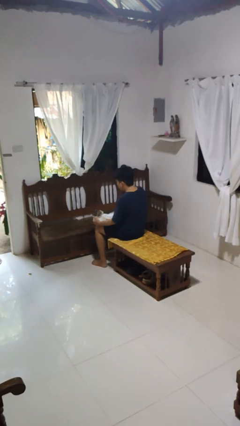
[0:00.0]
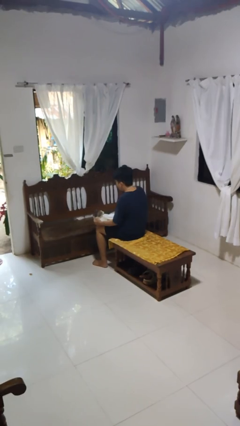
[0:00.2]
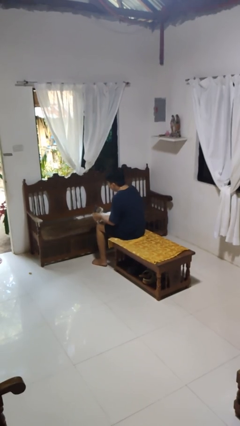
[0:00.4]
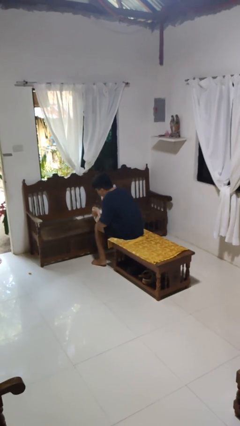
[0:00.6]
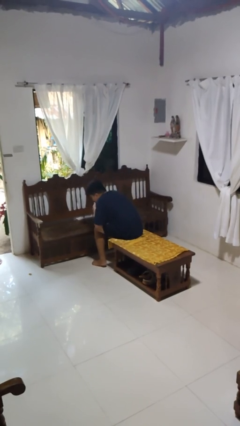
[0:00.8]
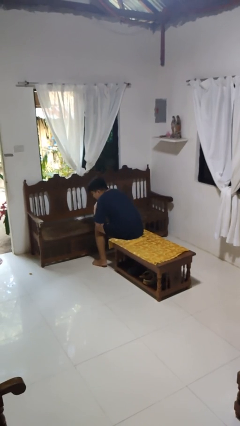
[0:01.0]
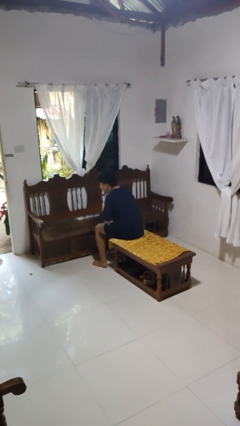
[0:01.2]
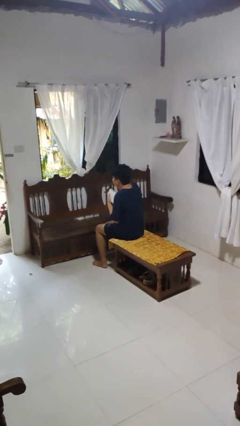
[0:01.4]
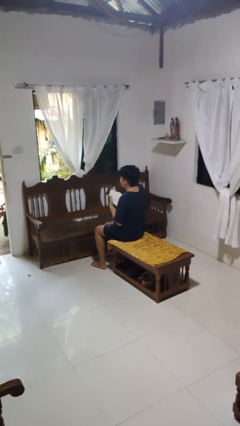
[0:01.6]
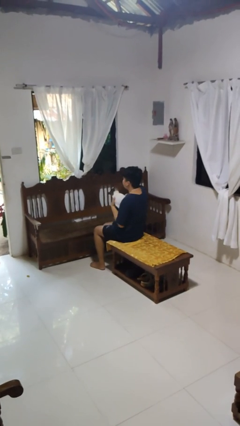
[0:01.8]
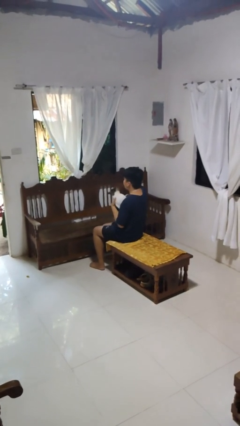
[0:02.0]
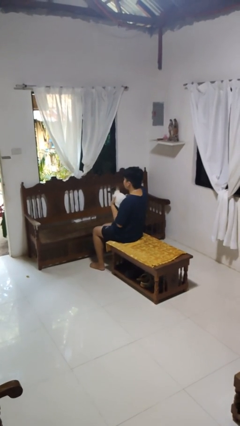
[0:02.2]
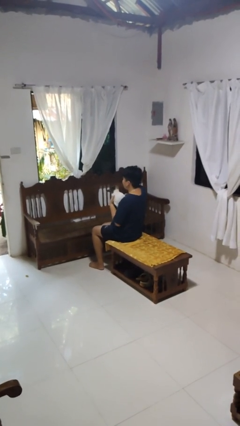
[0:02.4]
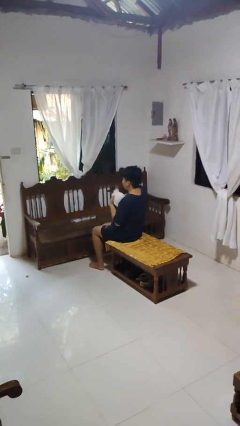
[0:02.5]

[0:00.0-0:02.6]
person hugs cat

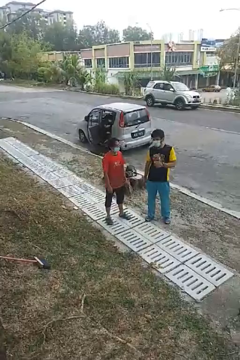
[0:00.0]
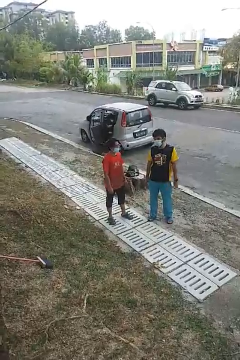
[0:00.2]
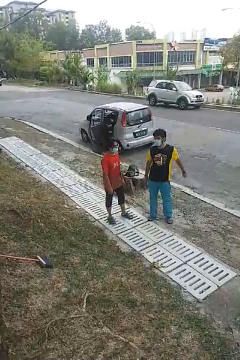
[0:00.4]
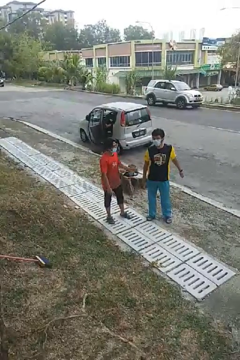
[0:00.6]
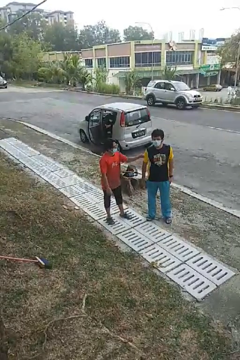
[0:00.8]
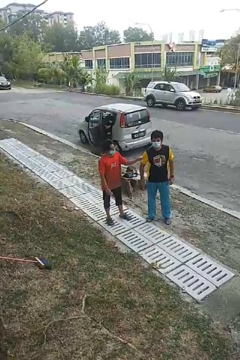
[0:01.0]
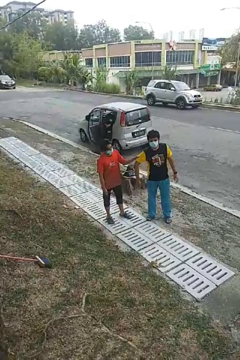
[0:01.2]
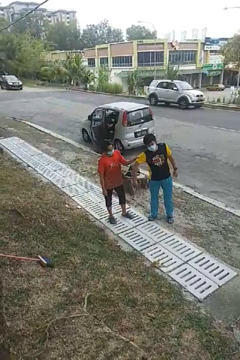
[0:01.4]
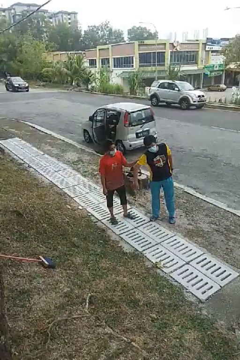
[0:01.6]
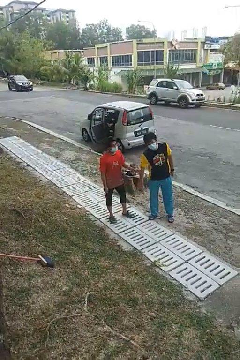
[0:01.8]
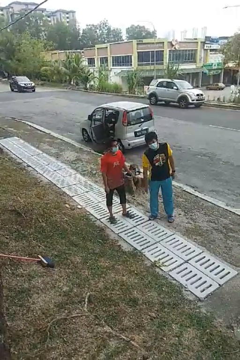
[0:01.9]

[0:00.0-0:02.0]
person grabs person by bicep

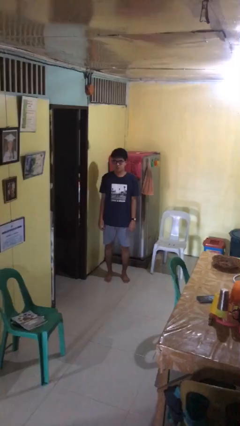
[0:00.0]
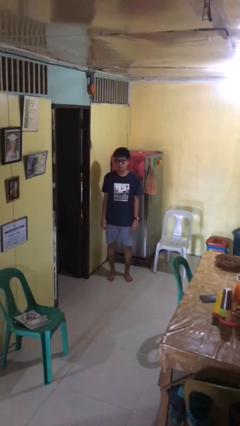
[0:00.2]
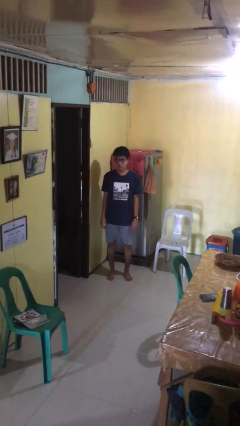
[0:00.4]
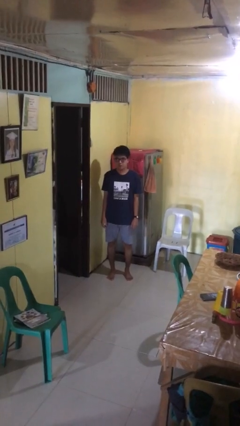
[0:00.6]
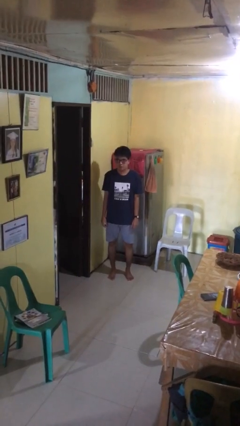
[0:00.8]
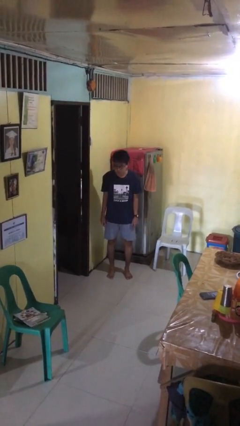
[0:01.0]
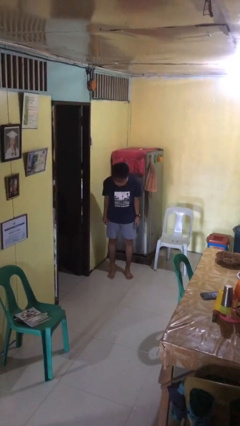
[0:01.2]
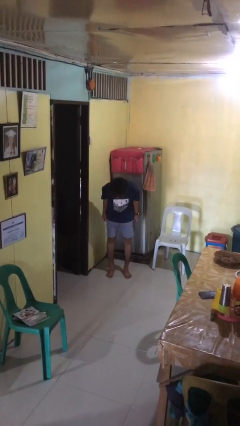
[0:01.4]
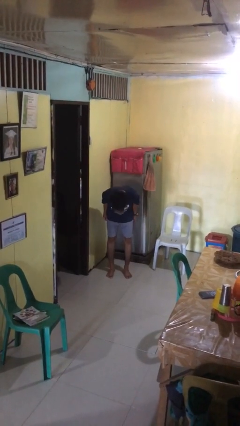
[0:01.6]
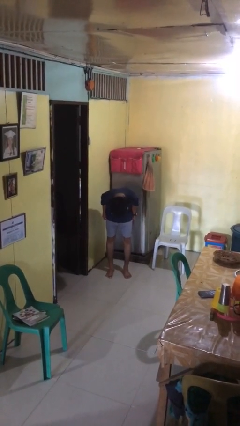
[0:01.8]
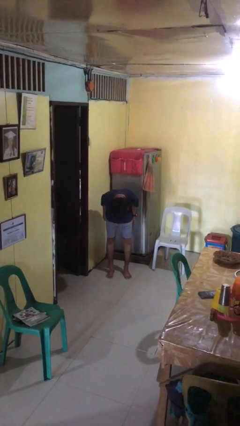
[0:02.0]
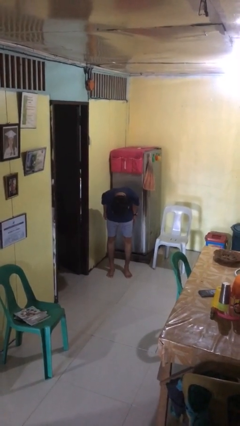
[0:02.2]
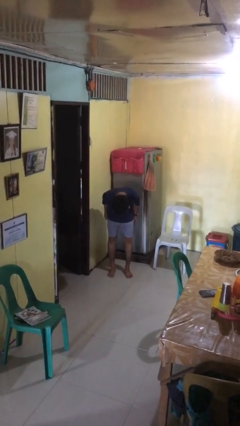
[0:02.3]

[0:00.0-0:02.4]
person bows

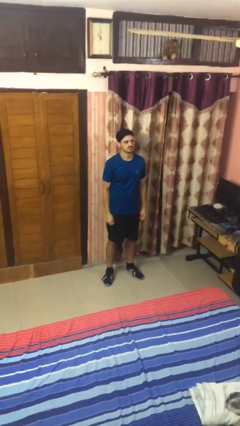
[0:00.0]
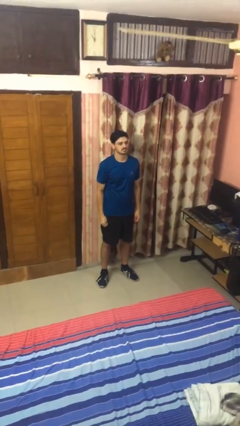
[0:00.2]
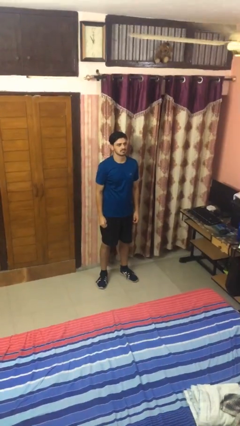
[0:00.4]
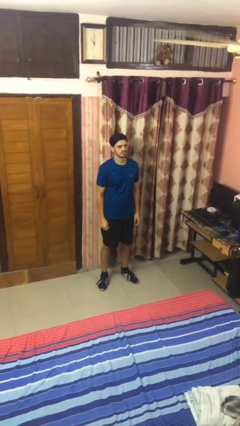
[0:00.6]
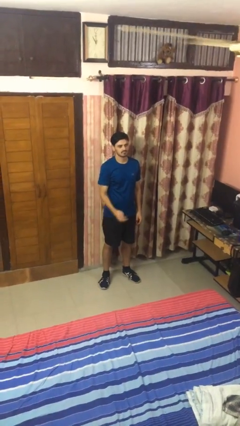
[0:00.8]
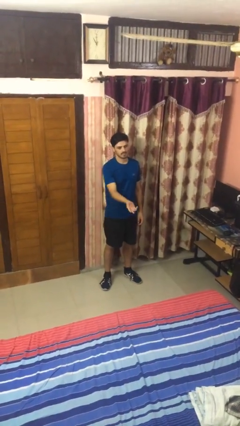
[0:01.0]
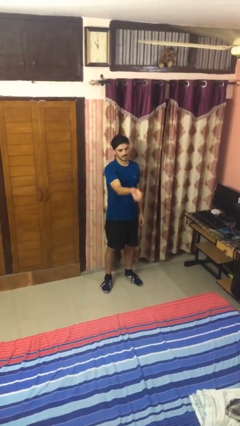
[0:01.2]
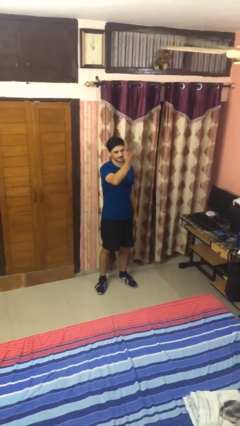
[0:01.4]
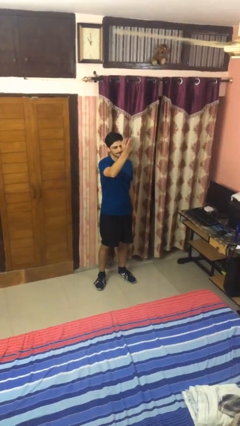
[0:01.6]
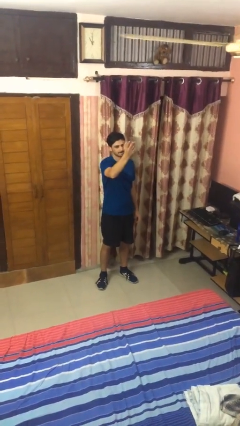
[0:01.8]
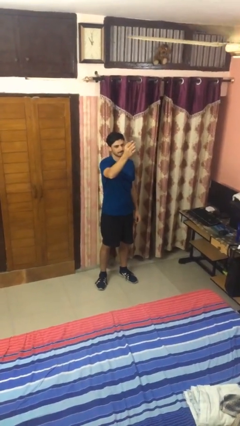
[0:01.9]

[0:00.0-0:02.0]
person gestures swipe up

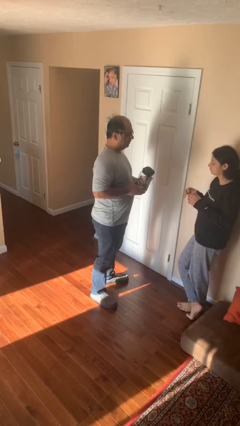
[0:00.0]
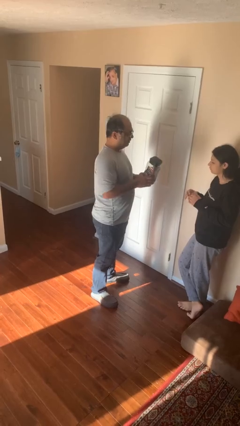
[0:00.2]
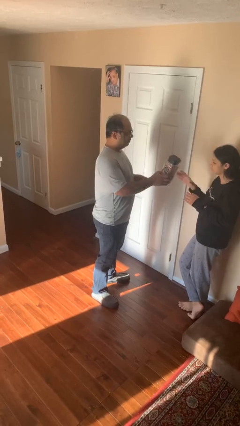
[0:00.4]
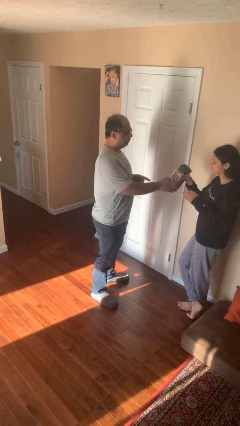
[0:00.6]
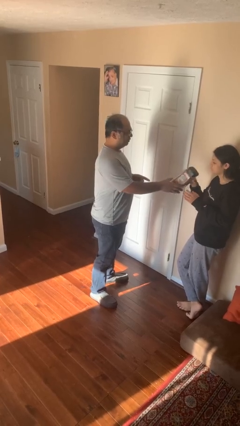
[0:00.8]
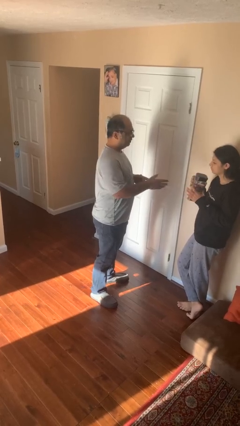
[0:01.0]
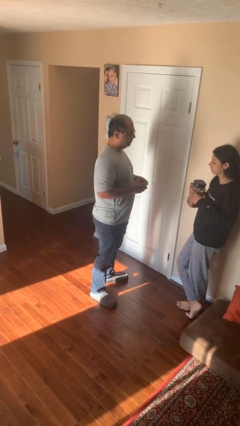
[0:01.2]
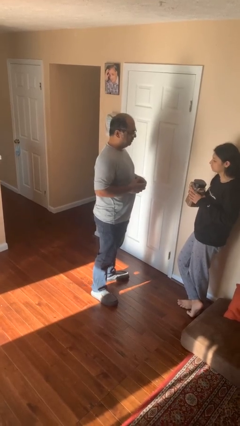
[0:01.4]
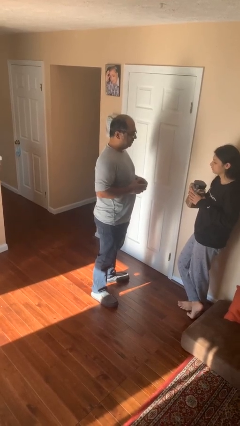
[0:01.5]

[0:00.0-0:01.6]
person transfers object to person

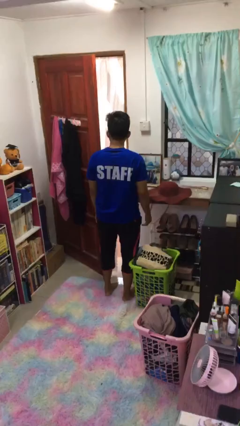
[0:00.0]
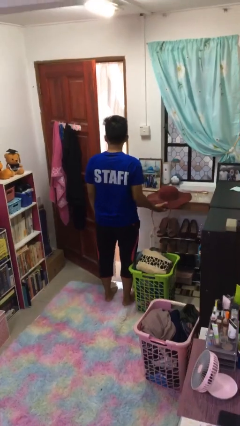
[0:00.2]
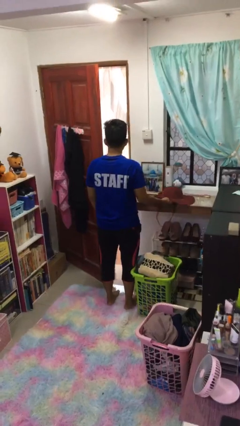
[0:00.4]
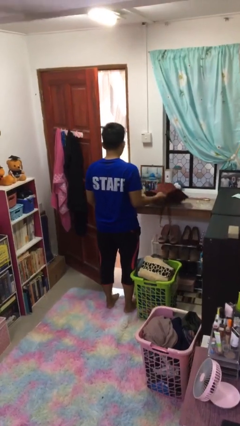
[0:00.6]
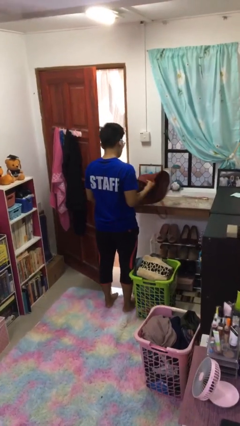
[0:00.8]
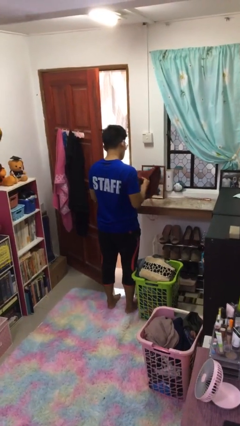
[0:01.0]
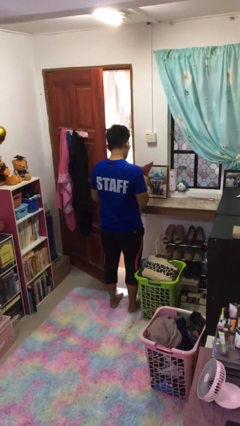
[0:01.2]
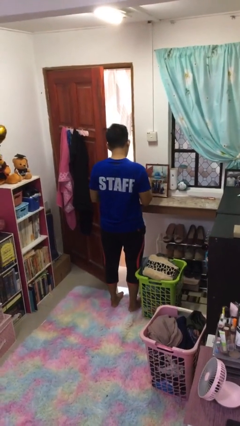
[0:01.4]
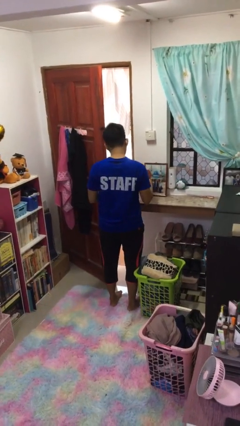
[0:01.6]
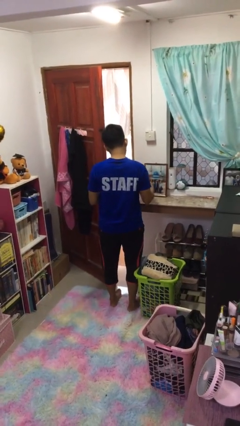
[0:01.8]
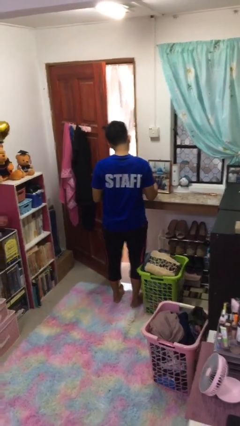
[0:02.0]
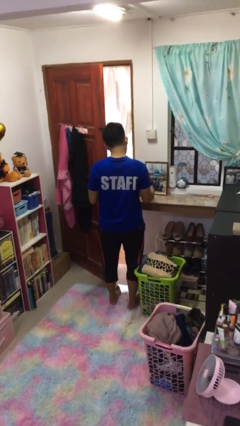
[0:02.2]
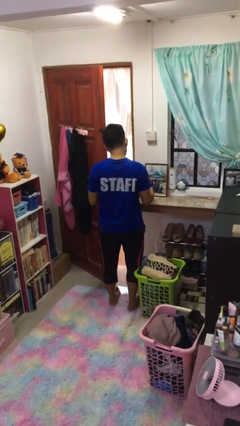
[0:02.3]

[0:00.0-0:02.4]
person picks up object from countertop

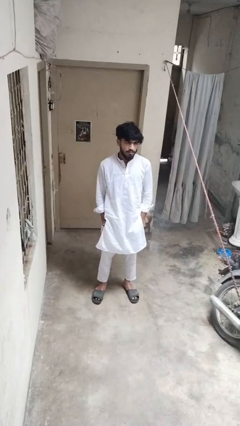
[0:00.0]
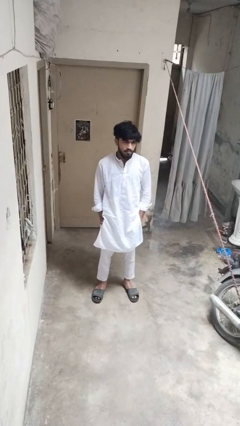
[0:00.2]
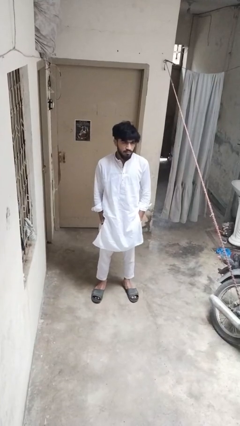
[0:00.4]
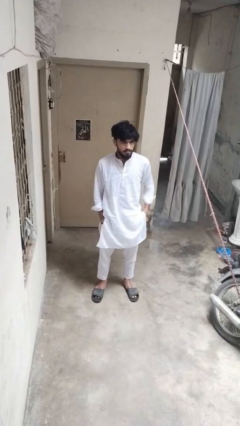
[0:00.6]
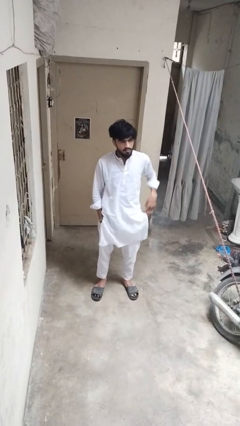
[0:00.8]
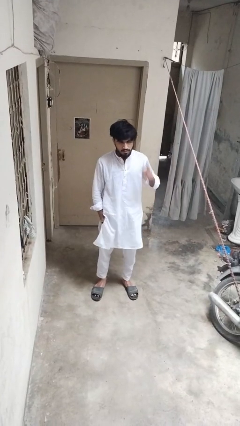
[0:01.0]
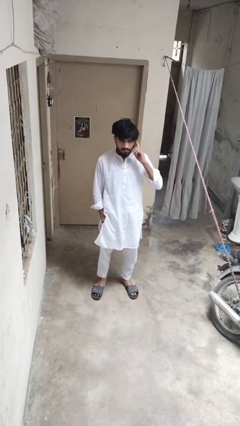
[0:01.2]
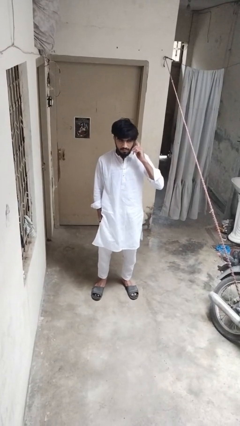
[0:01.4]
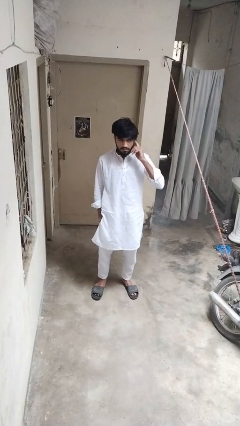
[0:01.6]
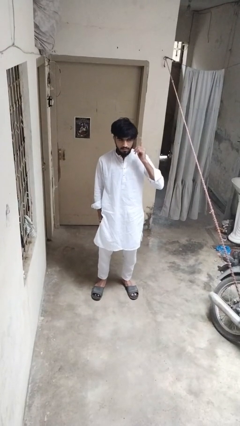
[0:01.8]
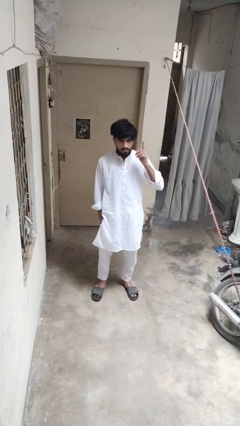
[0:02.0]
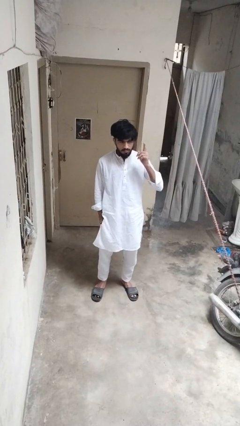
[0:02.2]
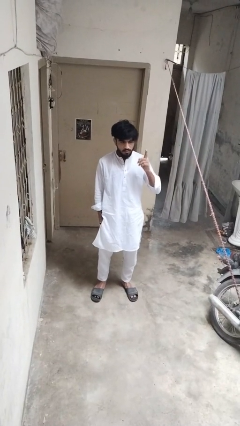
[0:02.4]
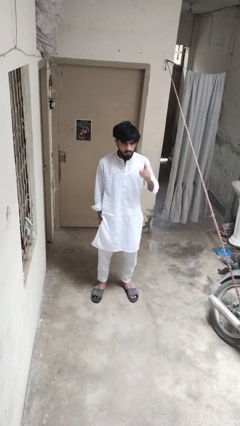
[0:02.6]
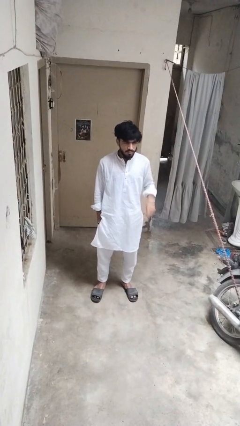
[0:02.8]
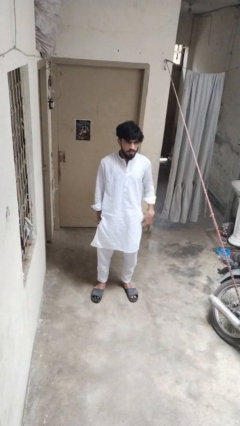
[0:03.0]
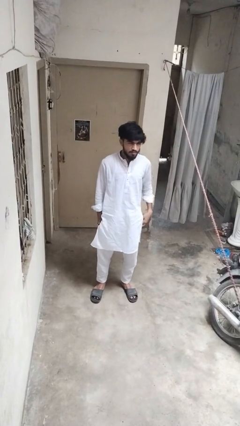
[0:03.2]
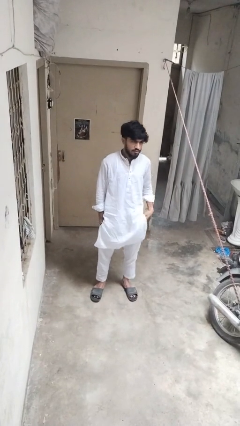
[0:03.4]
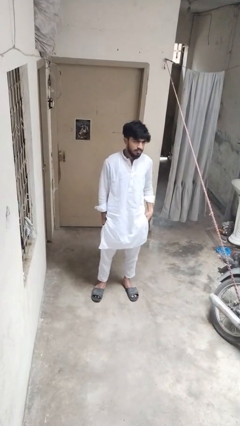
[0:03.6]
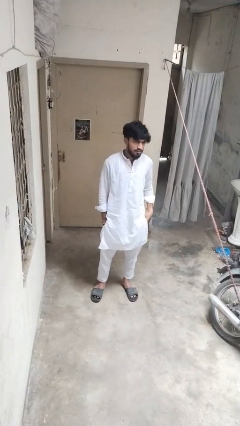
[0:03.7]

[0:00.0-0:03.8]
person gestures listen closely

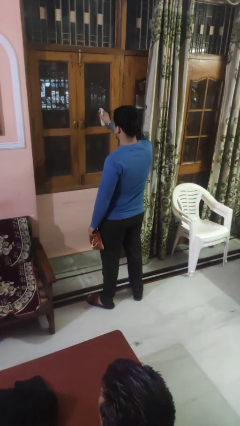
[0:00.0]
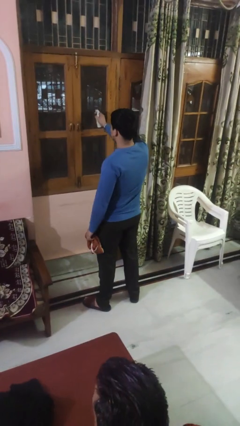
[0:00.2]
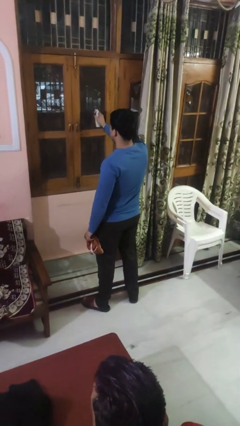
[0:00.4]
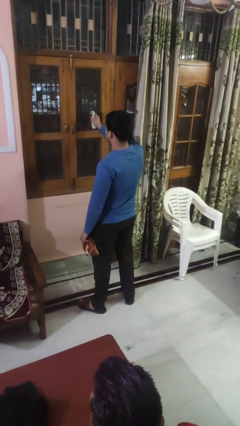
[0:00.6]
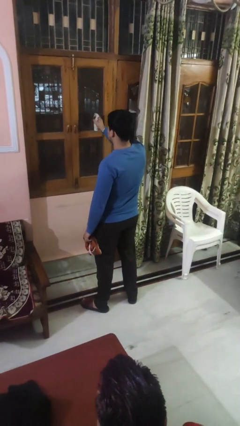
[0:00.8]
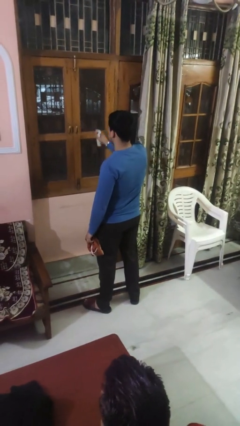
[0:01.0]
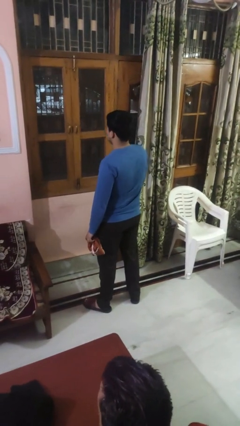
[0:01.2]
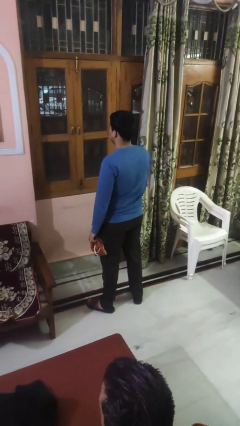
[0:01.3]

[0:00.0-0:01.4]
person sprays from bottle
